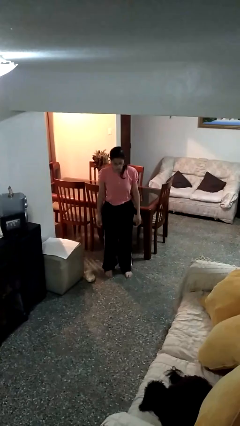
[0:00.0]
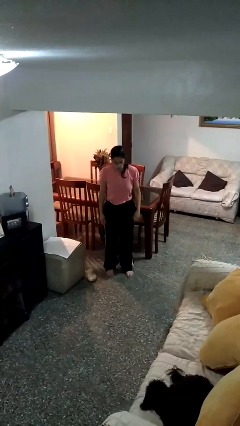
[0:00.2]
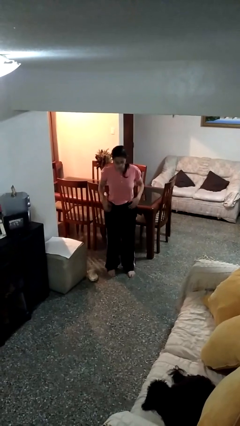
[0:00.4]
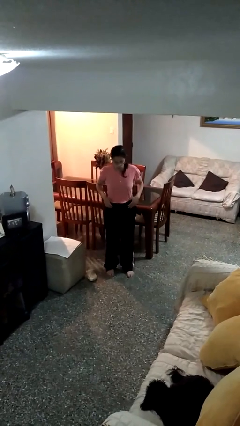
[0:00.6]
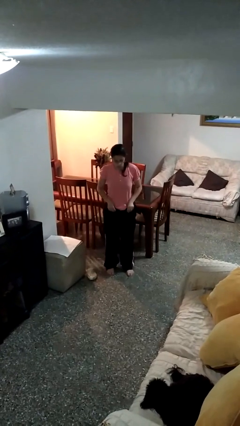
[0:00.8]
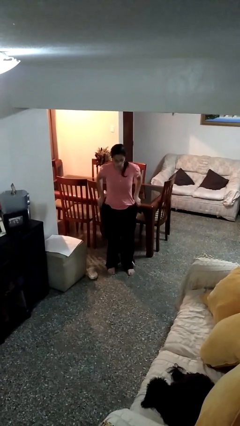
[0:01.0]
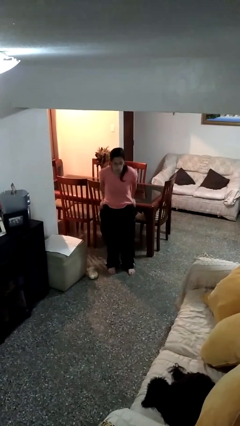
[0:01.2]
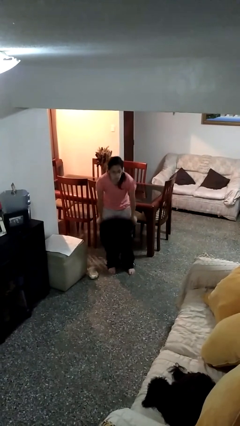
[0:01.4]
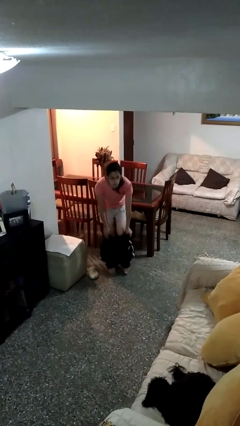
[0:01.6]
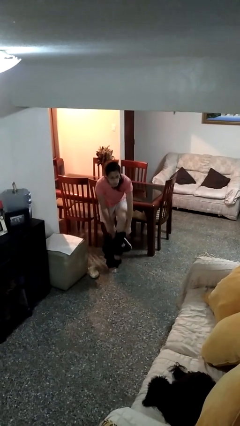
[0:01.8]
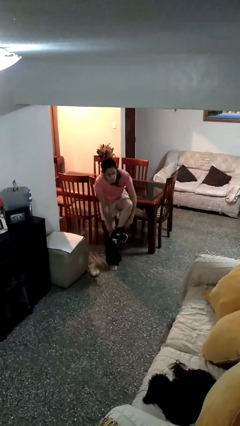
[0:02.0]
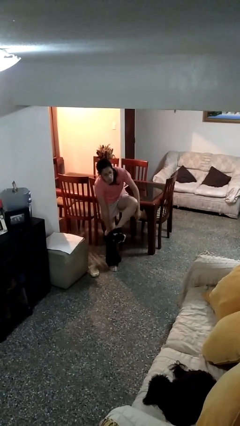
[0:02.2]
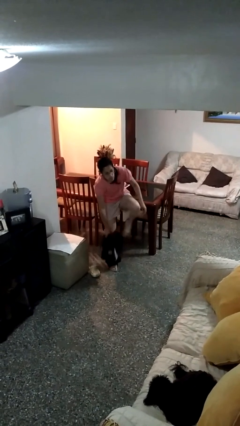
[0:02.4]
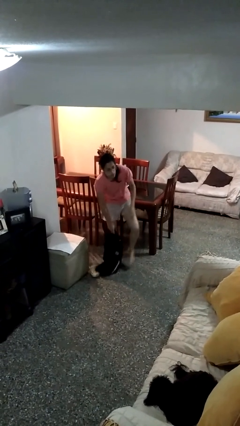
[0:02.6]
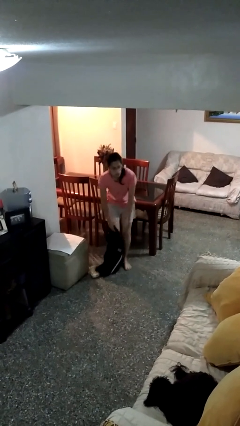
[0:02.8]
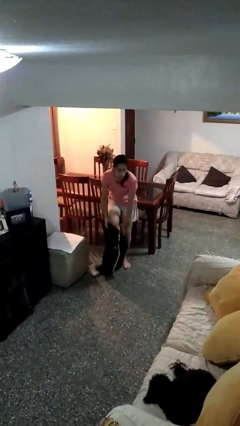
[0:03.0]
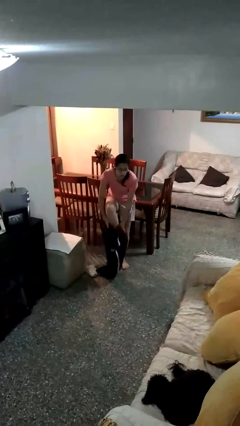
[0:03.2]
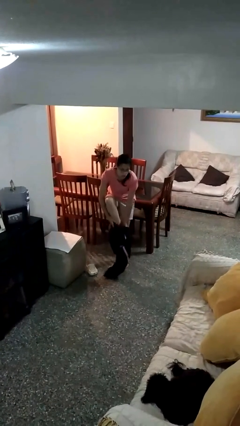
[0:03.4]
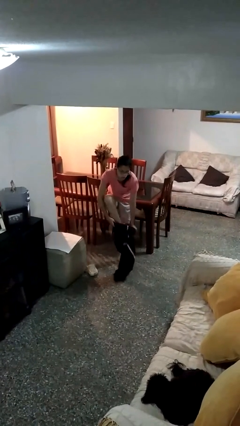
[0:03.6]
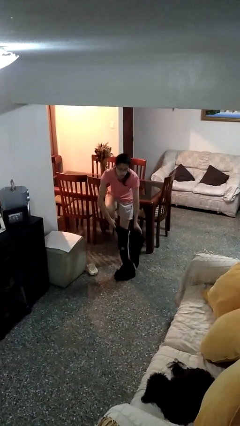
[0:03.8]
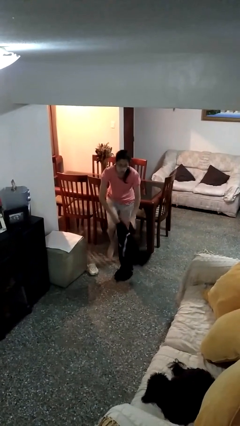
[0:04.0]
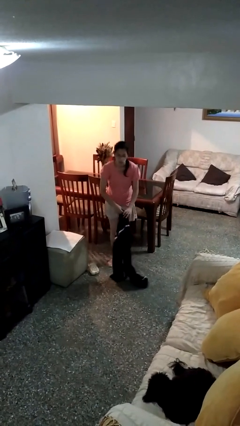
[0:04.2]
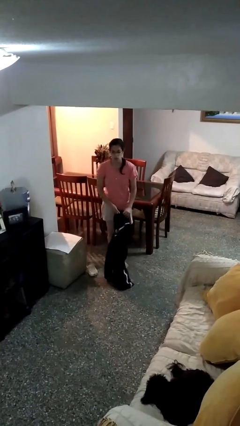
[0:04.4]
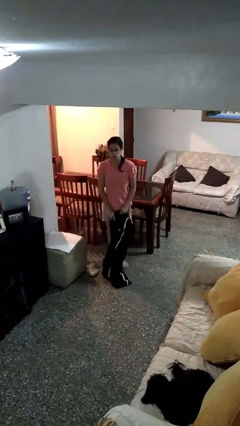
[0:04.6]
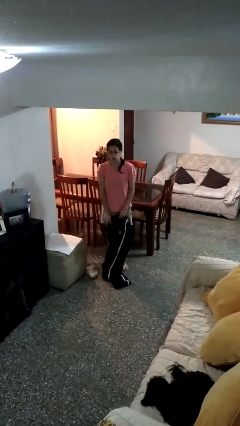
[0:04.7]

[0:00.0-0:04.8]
person puts on pants

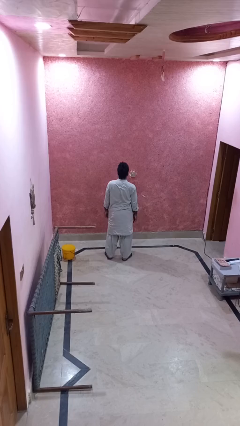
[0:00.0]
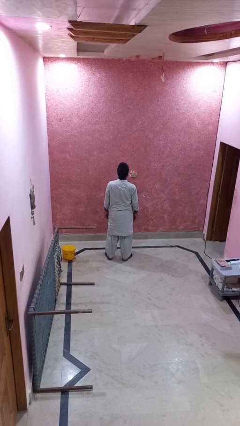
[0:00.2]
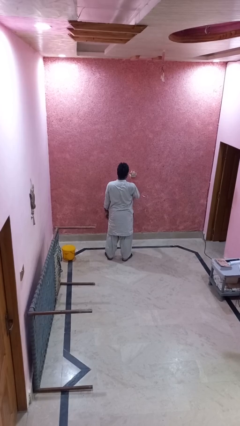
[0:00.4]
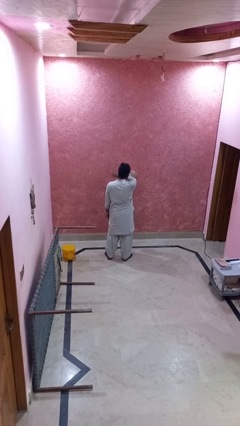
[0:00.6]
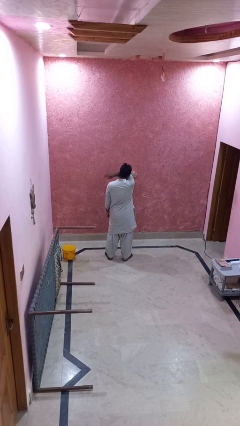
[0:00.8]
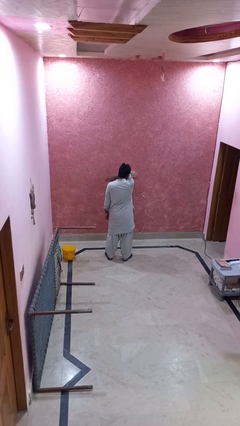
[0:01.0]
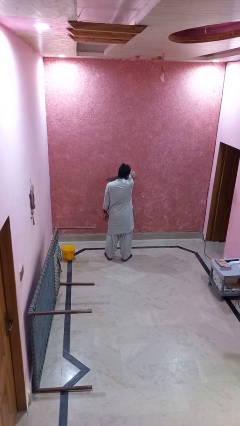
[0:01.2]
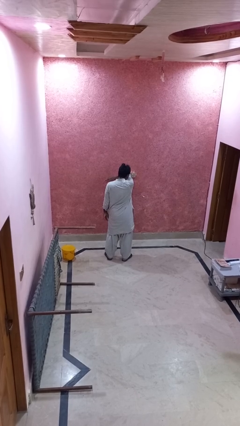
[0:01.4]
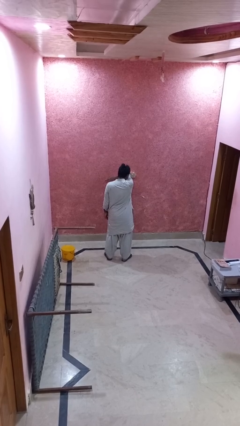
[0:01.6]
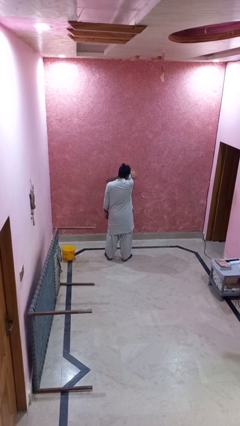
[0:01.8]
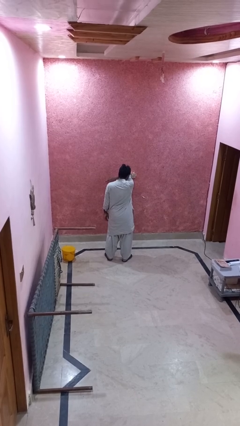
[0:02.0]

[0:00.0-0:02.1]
person sneezes into arm

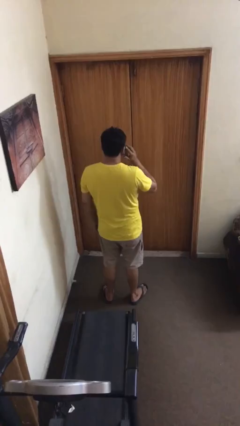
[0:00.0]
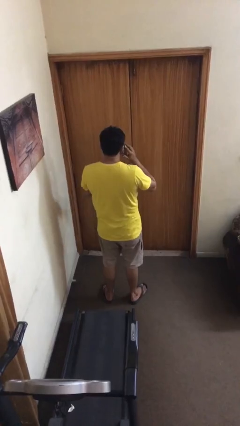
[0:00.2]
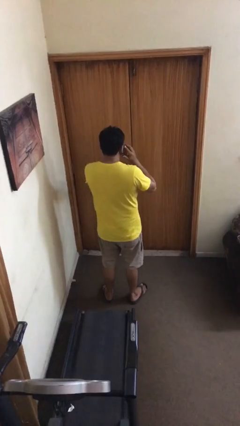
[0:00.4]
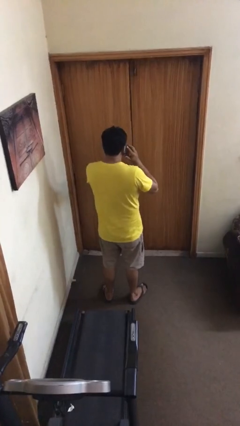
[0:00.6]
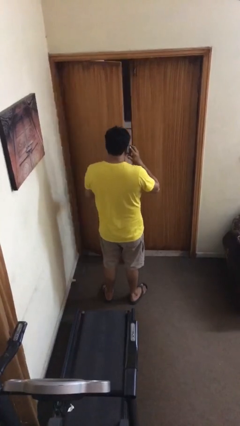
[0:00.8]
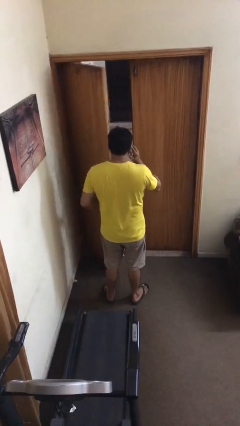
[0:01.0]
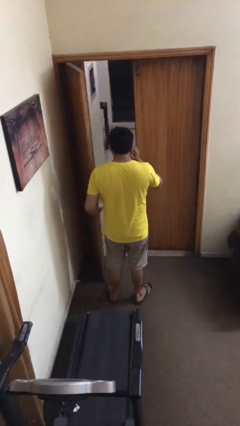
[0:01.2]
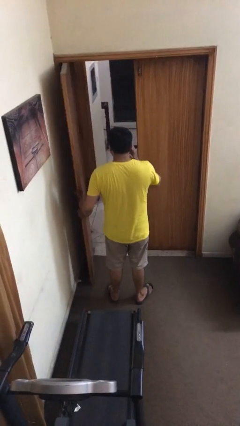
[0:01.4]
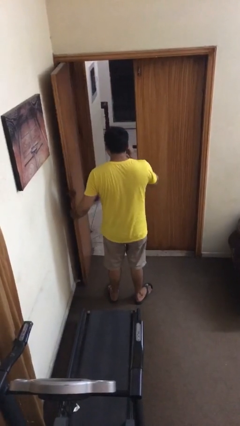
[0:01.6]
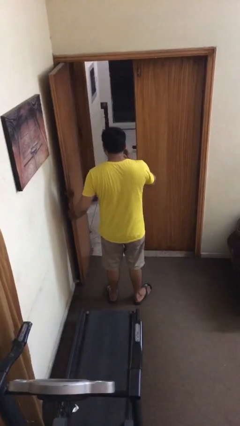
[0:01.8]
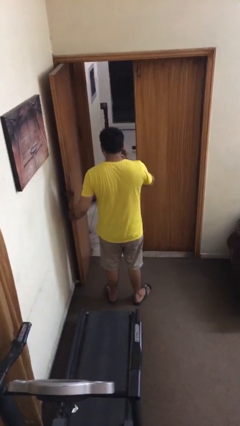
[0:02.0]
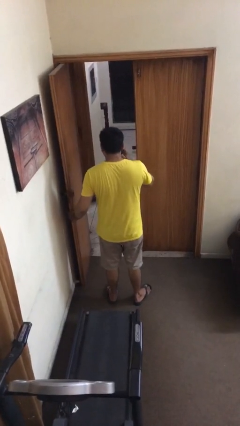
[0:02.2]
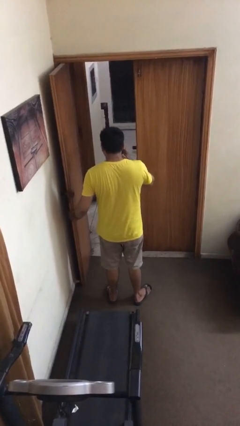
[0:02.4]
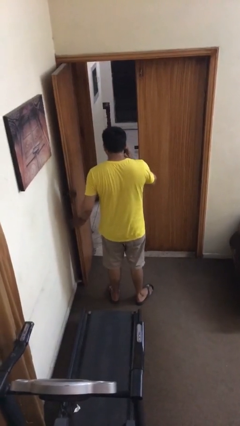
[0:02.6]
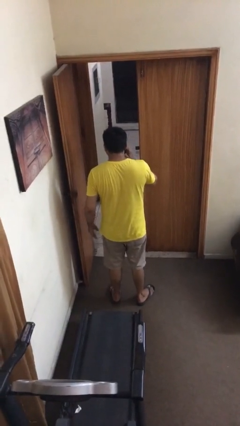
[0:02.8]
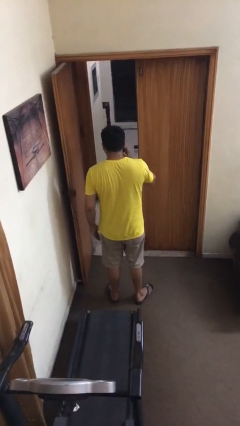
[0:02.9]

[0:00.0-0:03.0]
person opens facility door

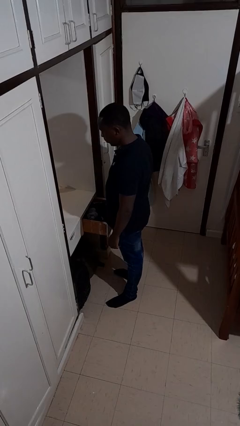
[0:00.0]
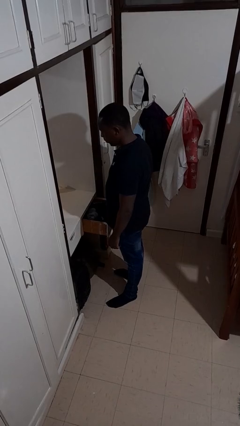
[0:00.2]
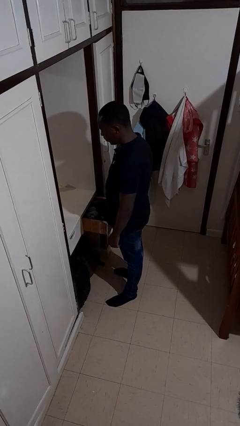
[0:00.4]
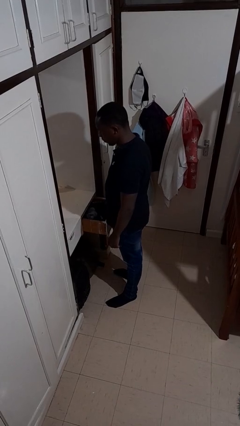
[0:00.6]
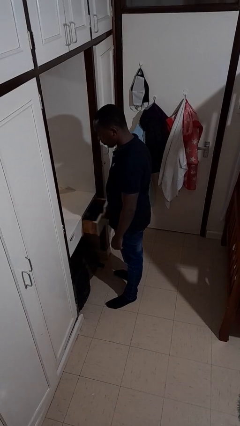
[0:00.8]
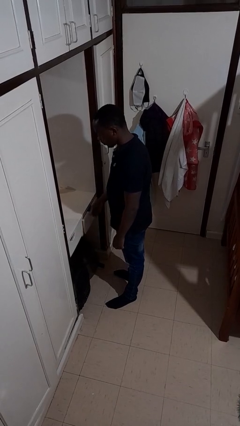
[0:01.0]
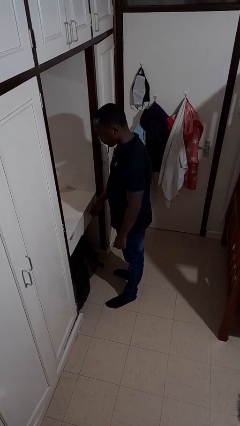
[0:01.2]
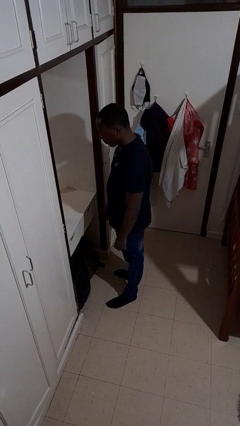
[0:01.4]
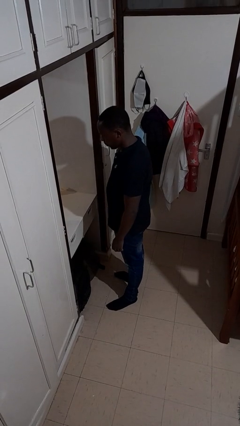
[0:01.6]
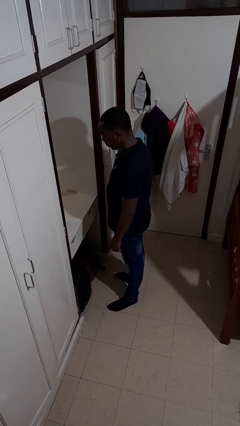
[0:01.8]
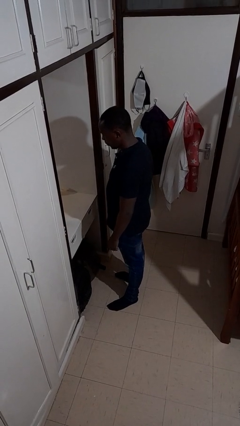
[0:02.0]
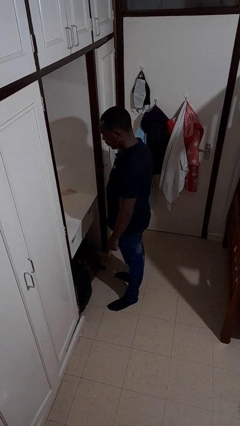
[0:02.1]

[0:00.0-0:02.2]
person closes dresser drawer

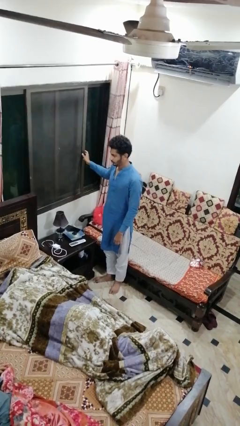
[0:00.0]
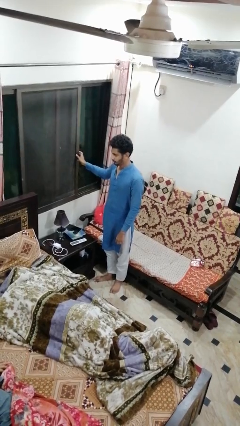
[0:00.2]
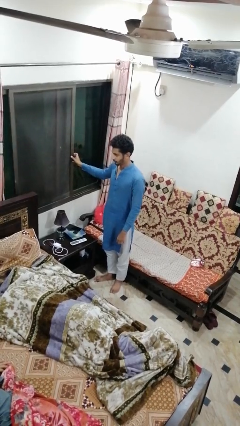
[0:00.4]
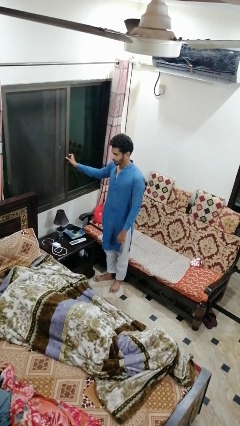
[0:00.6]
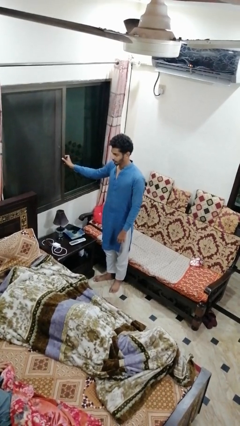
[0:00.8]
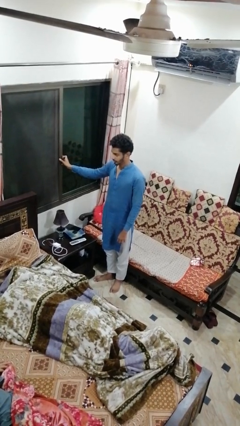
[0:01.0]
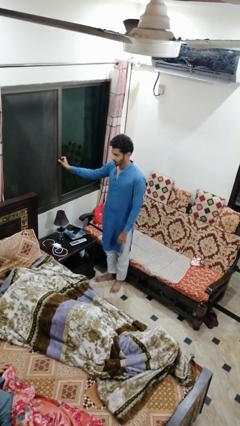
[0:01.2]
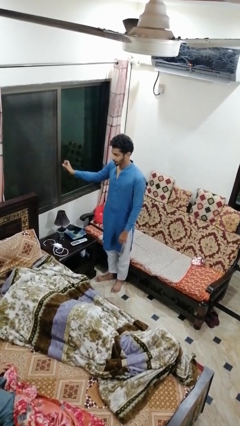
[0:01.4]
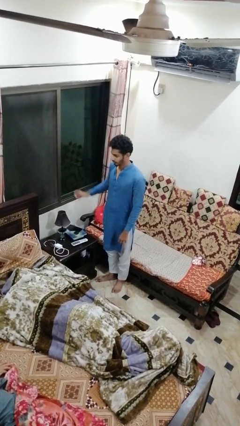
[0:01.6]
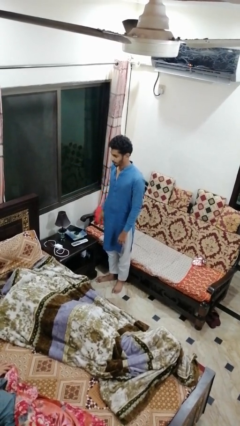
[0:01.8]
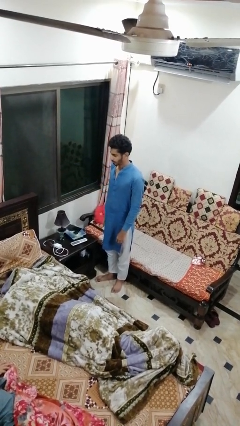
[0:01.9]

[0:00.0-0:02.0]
person closes home window

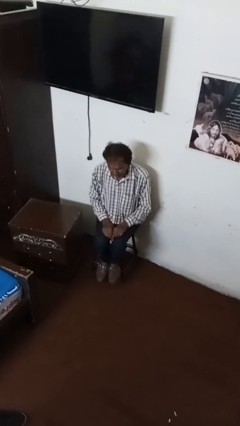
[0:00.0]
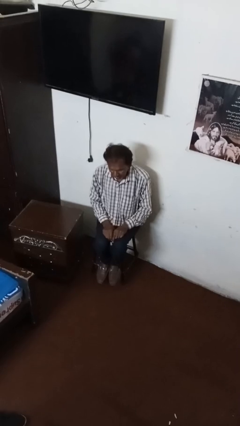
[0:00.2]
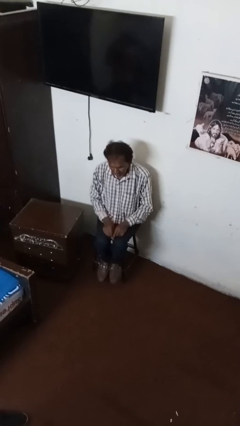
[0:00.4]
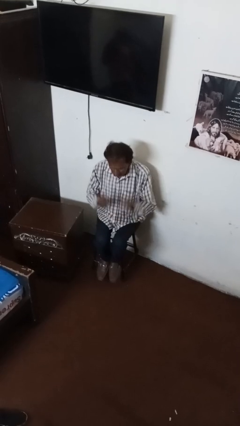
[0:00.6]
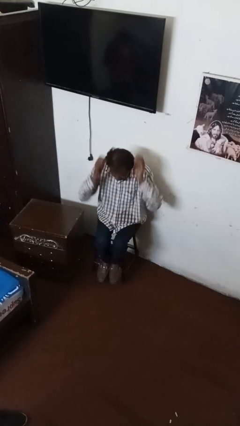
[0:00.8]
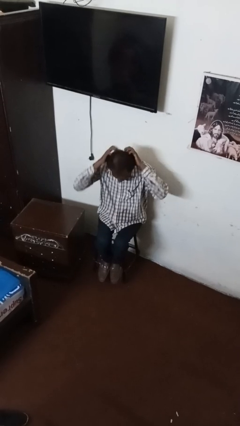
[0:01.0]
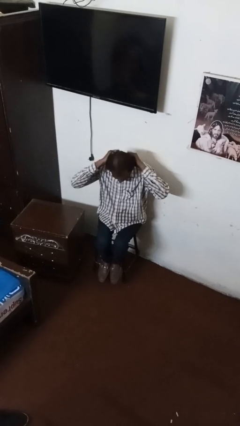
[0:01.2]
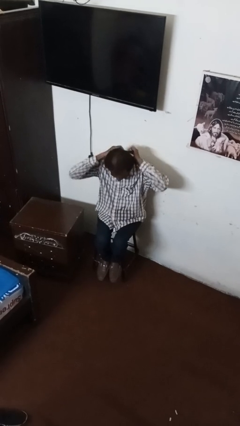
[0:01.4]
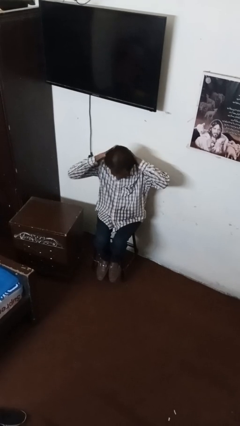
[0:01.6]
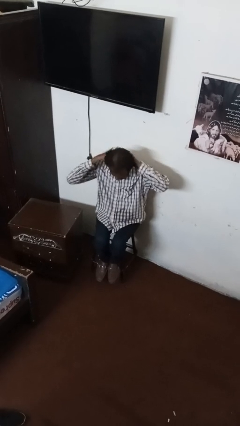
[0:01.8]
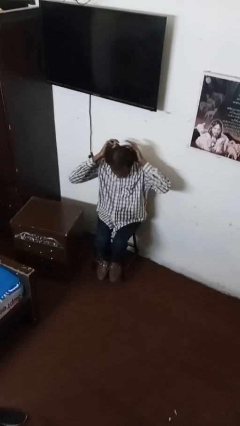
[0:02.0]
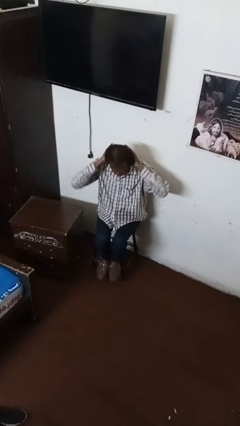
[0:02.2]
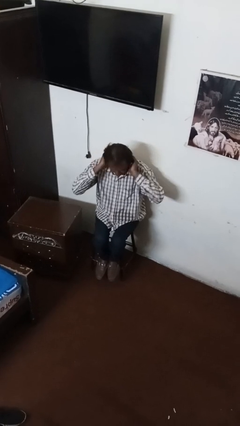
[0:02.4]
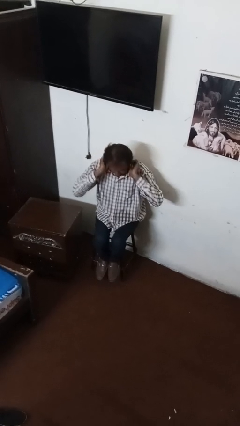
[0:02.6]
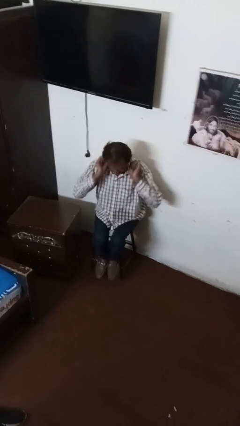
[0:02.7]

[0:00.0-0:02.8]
person strokes hair

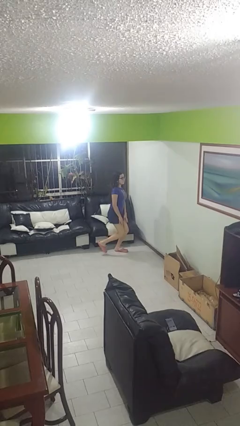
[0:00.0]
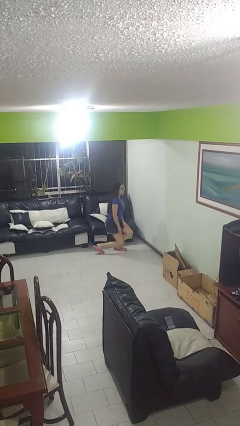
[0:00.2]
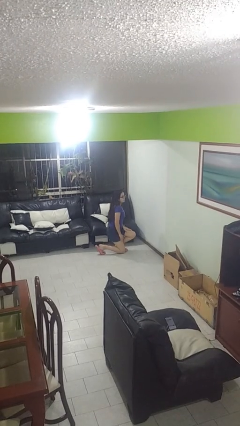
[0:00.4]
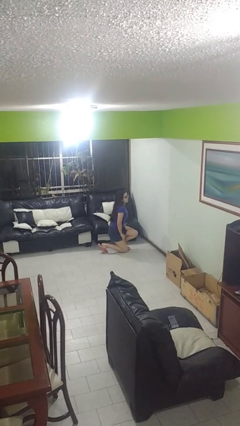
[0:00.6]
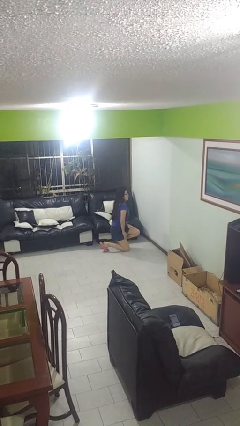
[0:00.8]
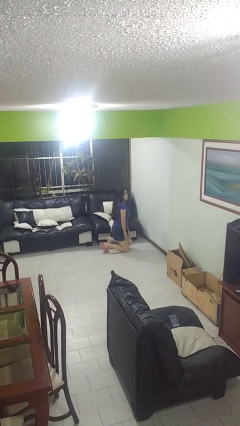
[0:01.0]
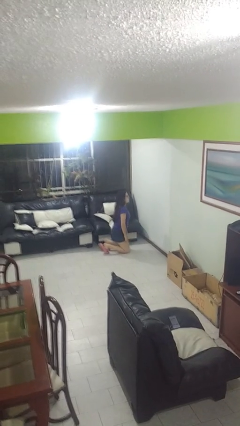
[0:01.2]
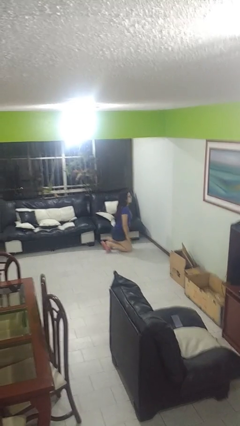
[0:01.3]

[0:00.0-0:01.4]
person kneels
